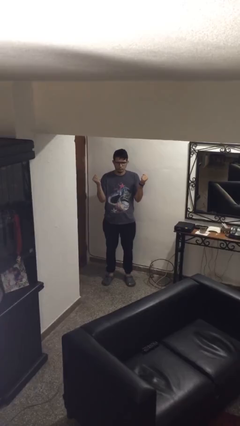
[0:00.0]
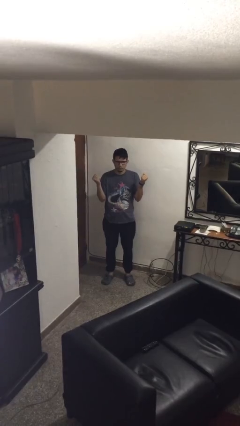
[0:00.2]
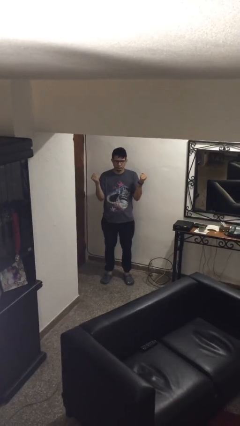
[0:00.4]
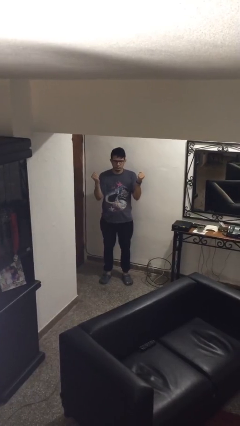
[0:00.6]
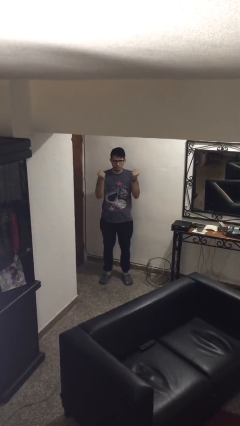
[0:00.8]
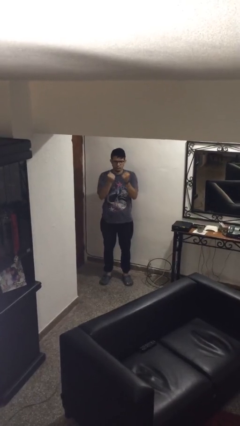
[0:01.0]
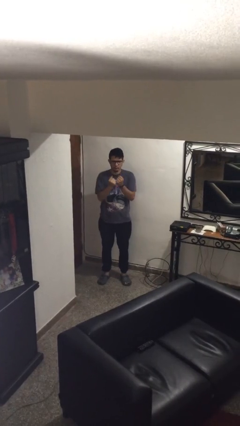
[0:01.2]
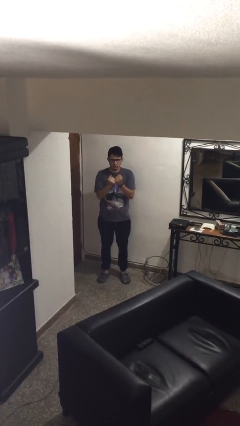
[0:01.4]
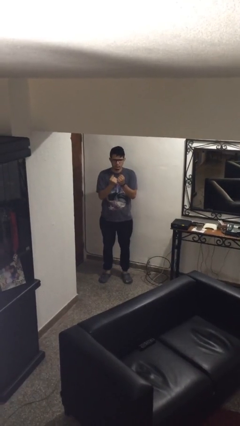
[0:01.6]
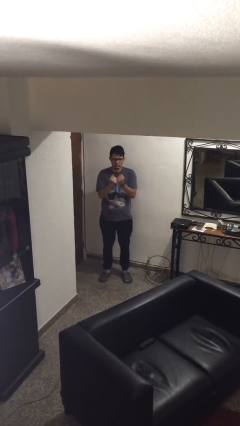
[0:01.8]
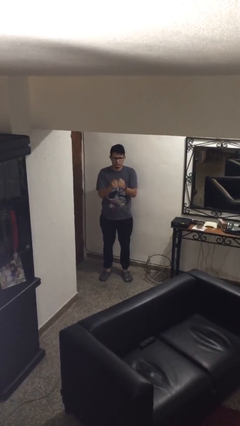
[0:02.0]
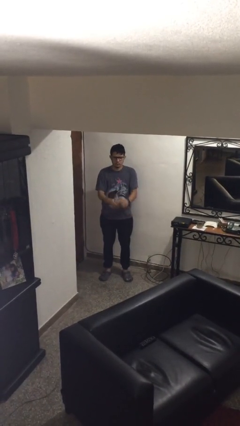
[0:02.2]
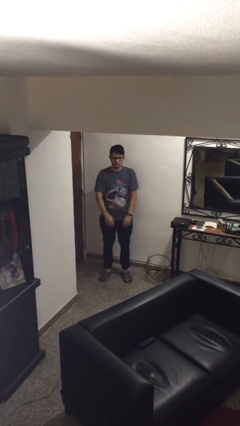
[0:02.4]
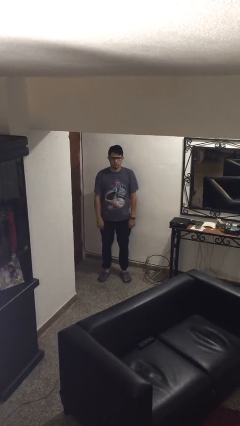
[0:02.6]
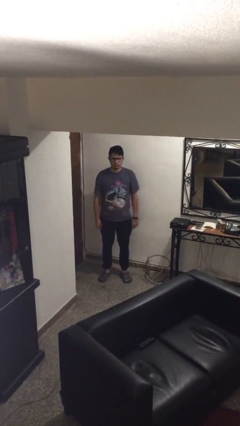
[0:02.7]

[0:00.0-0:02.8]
person gestures zoom out

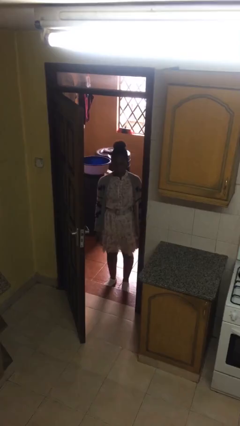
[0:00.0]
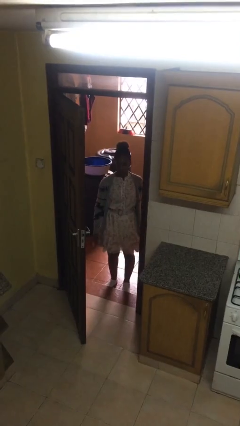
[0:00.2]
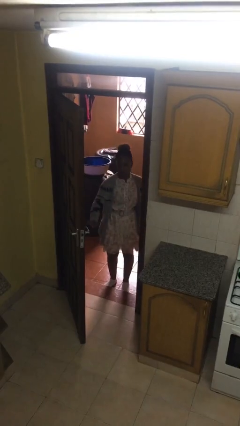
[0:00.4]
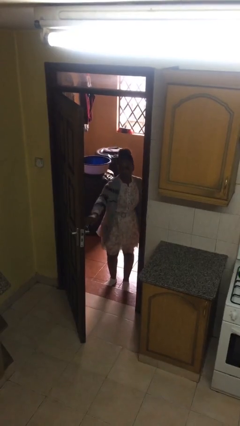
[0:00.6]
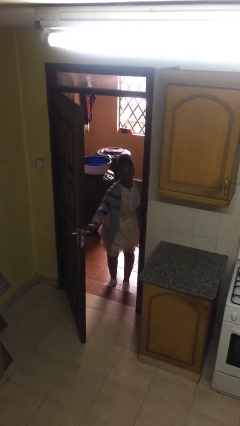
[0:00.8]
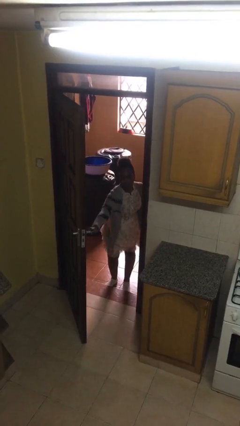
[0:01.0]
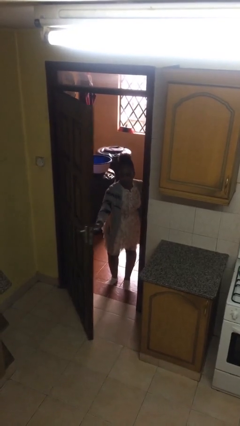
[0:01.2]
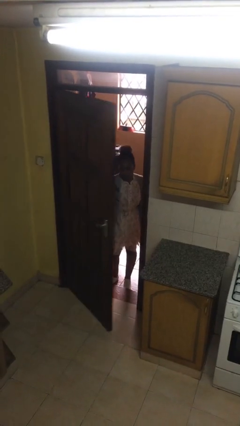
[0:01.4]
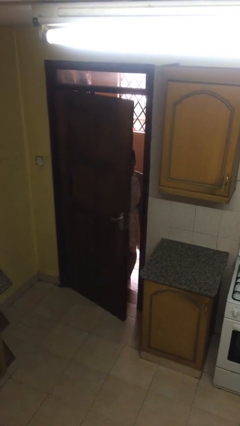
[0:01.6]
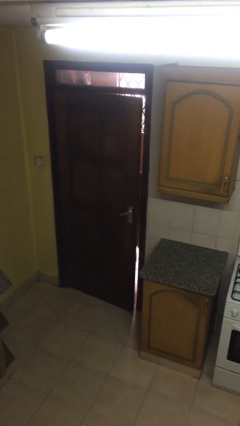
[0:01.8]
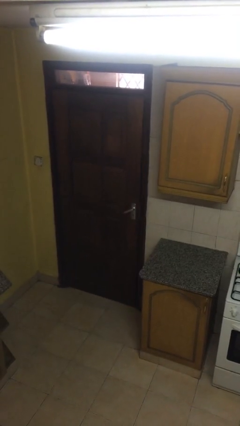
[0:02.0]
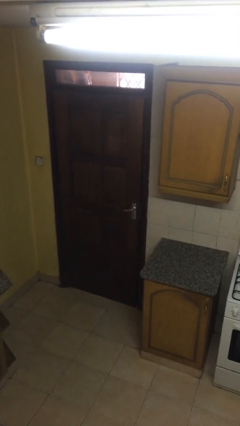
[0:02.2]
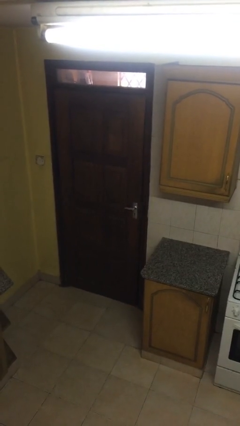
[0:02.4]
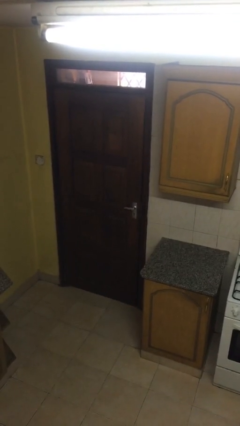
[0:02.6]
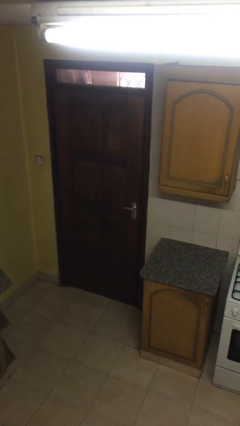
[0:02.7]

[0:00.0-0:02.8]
person closes facility door

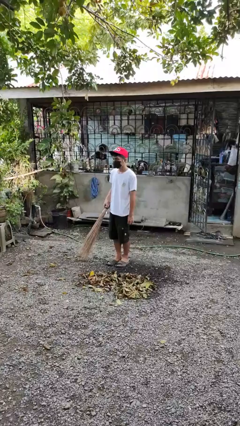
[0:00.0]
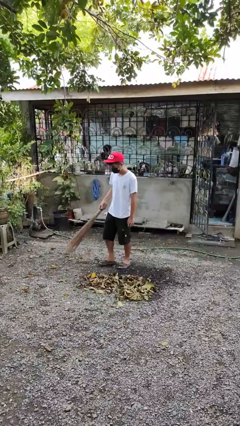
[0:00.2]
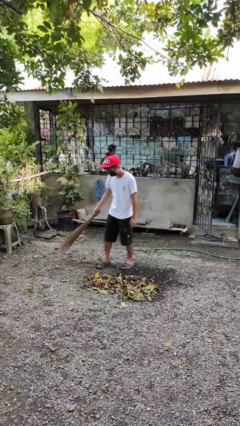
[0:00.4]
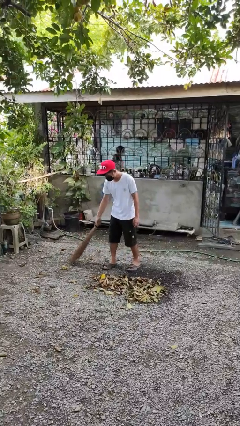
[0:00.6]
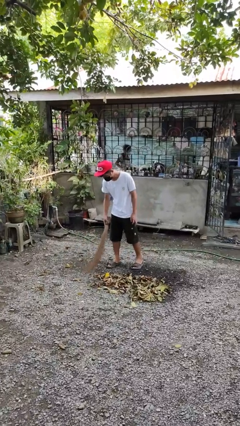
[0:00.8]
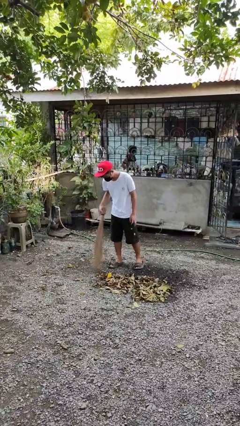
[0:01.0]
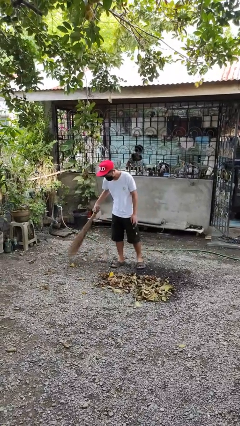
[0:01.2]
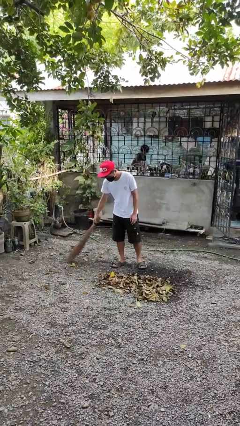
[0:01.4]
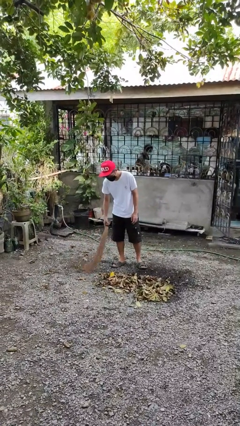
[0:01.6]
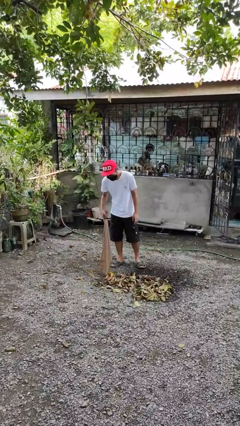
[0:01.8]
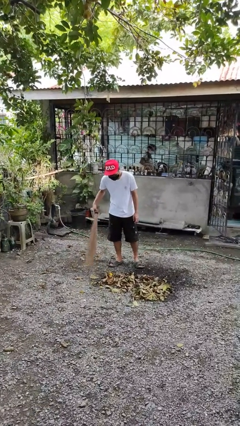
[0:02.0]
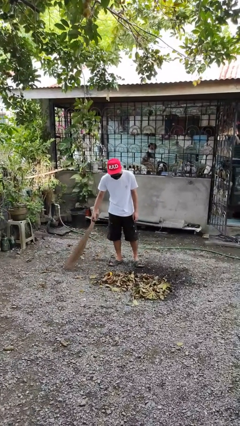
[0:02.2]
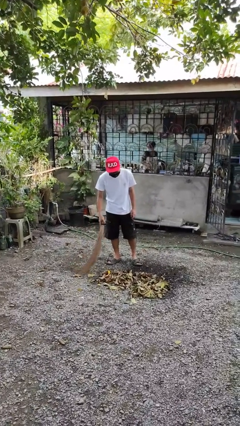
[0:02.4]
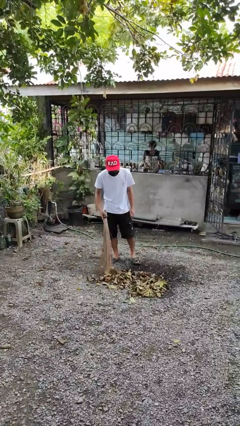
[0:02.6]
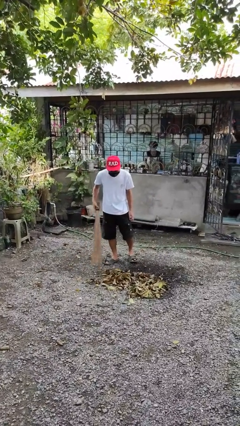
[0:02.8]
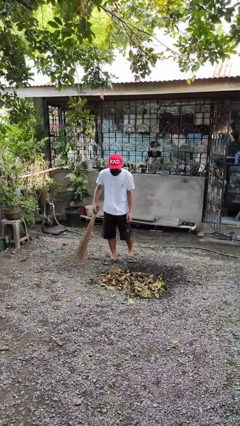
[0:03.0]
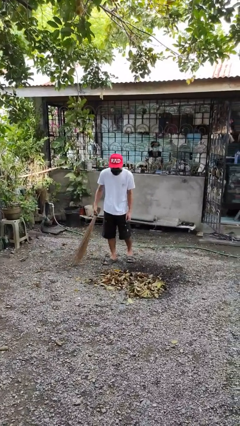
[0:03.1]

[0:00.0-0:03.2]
person sweeps floor

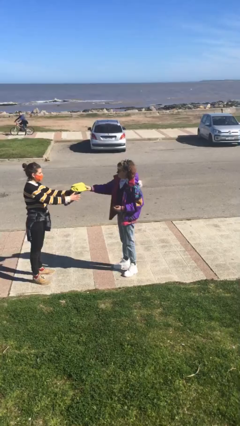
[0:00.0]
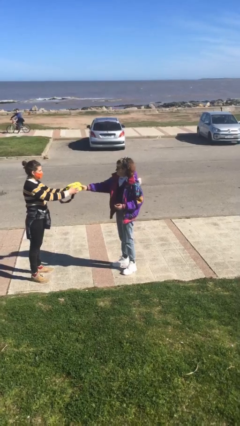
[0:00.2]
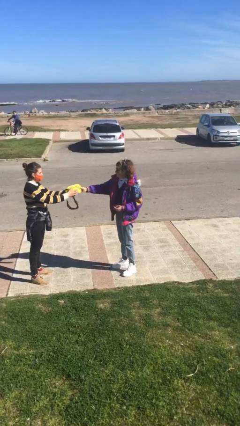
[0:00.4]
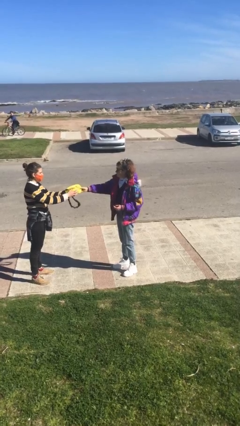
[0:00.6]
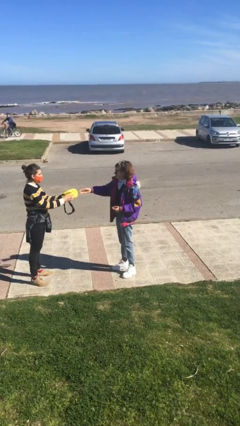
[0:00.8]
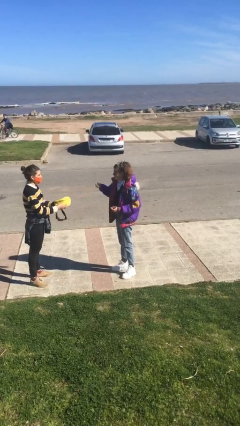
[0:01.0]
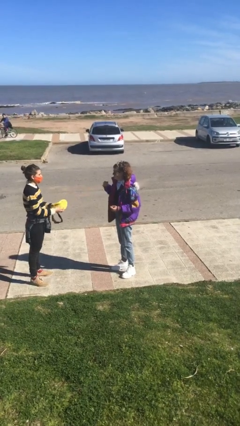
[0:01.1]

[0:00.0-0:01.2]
person transfers object to person

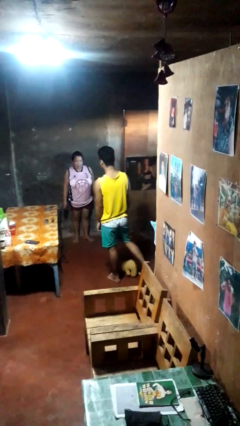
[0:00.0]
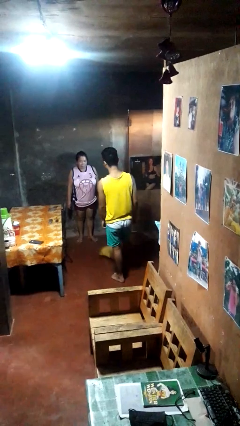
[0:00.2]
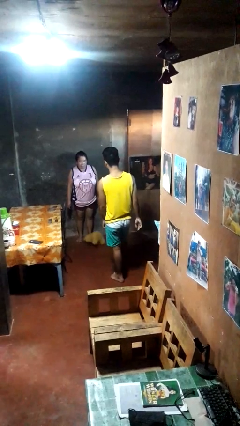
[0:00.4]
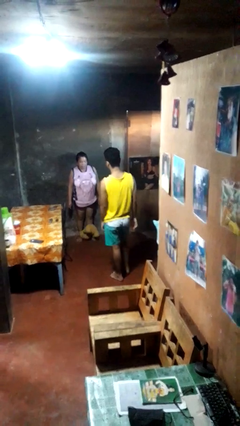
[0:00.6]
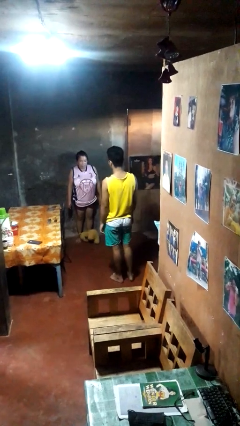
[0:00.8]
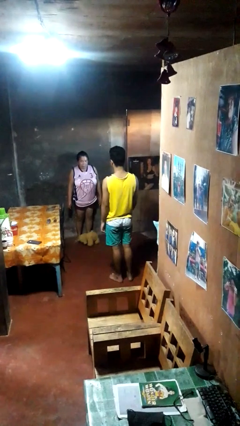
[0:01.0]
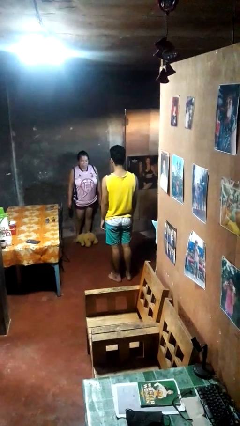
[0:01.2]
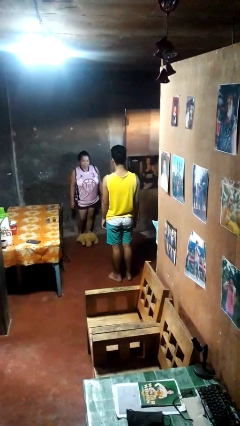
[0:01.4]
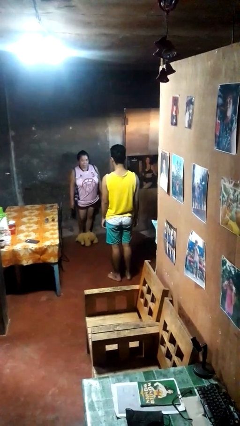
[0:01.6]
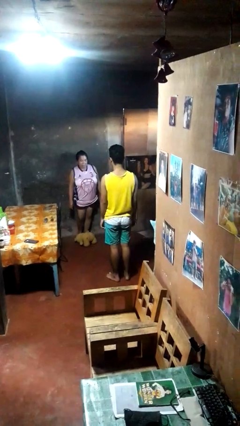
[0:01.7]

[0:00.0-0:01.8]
person kicks object to person

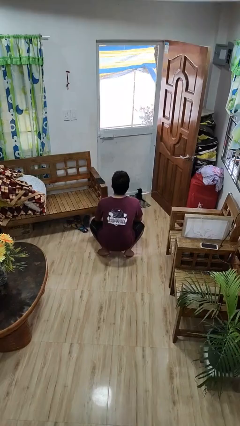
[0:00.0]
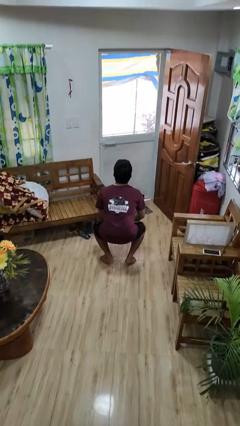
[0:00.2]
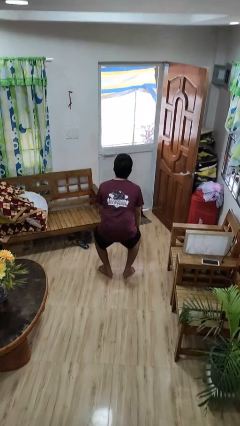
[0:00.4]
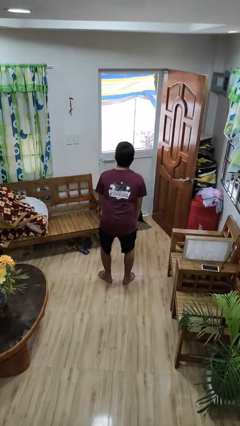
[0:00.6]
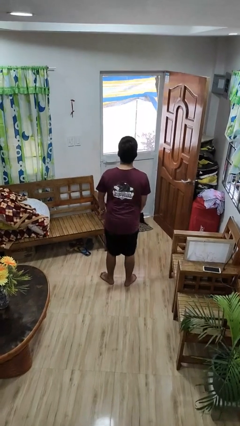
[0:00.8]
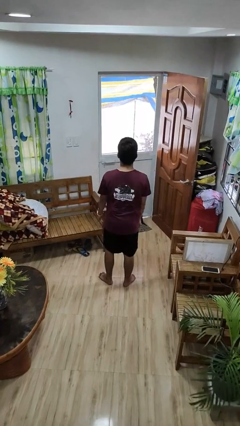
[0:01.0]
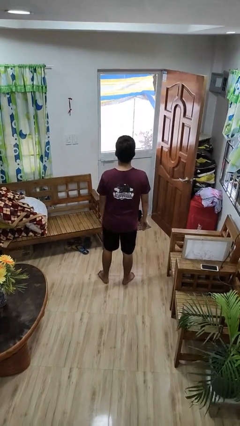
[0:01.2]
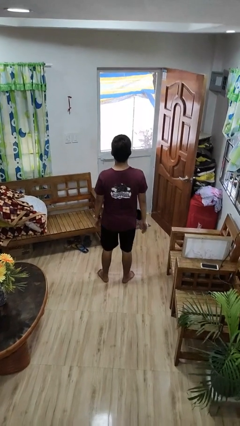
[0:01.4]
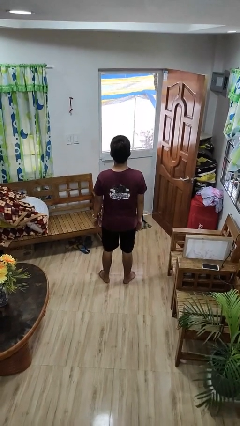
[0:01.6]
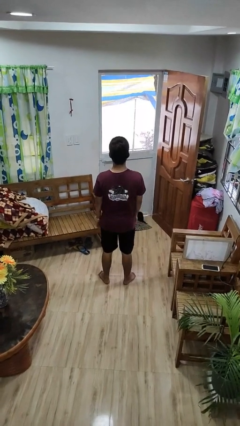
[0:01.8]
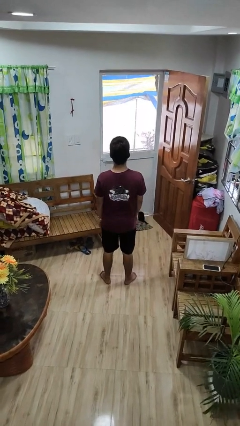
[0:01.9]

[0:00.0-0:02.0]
person stands up

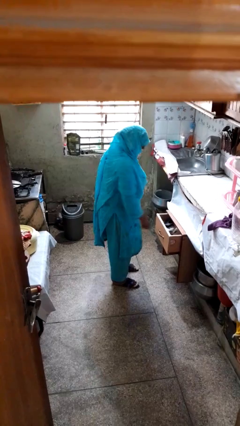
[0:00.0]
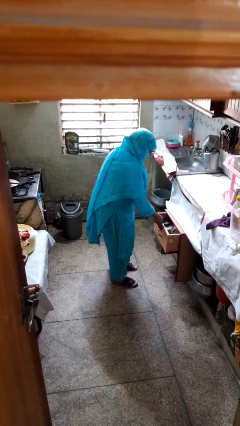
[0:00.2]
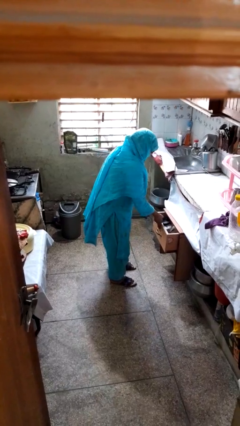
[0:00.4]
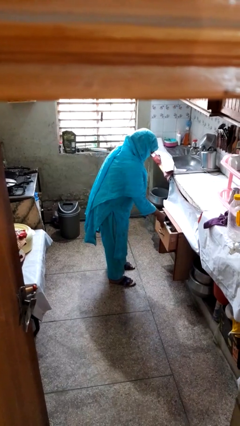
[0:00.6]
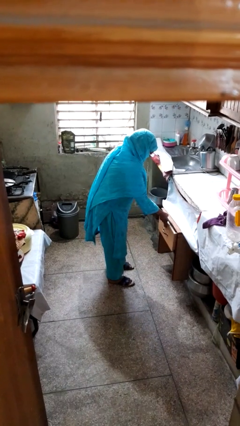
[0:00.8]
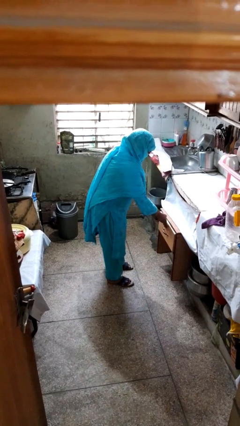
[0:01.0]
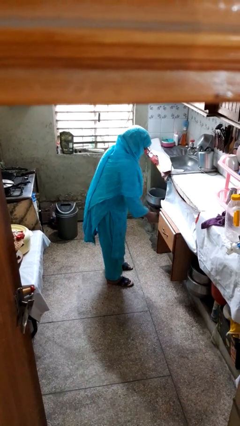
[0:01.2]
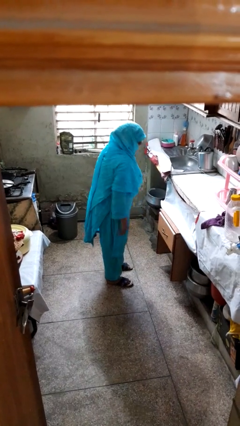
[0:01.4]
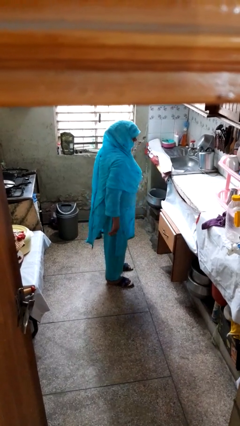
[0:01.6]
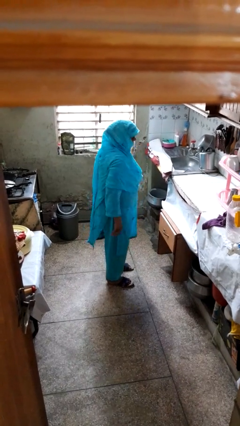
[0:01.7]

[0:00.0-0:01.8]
person closes kitchen drawer

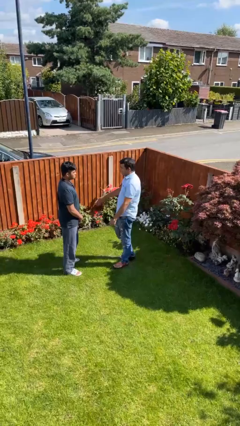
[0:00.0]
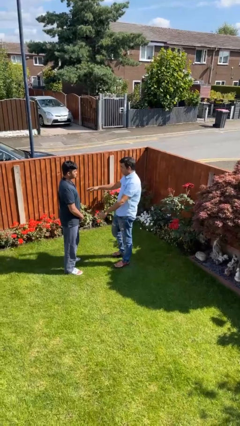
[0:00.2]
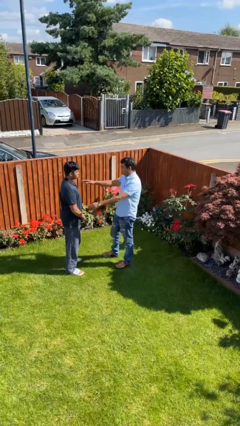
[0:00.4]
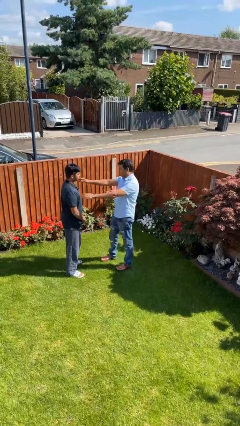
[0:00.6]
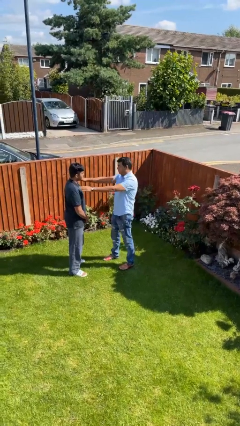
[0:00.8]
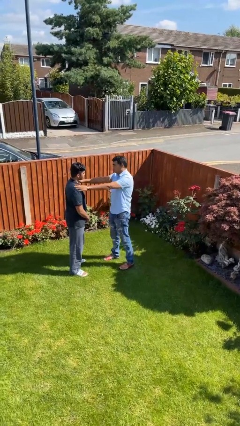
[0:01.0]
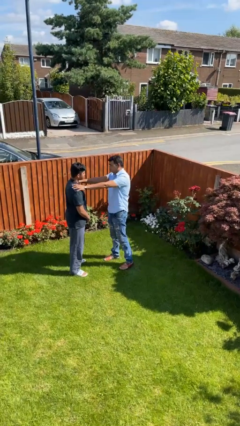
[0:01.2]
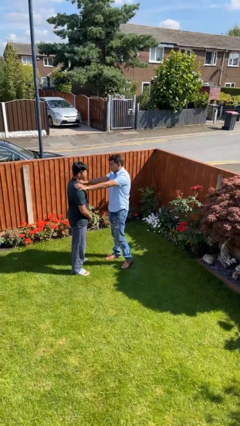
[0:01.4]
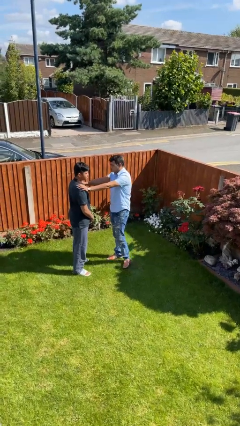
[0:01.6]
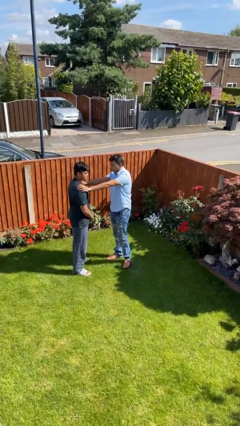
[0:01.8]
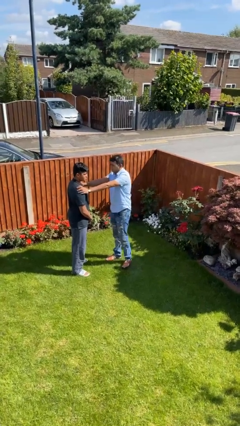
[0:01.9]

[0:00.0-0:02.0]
person pounds shoulders of person
